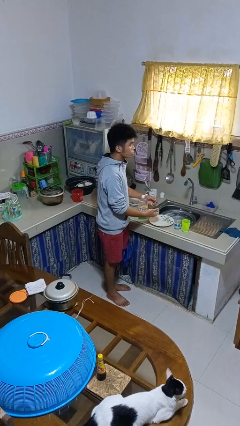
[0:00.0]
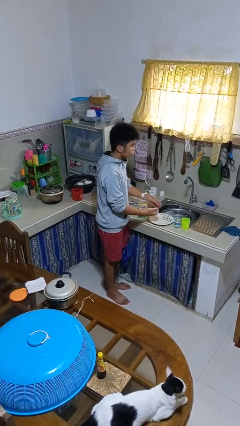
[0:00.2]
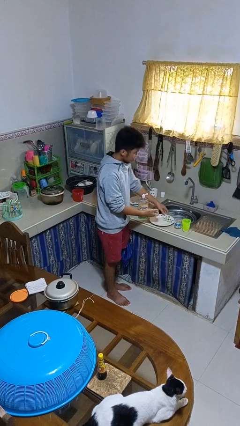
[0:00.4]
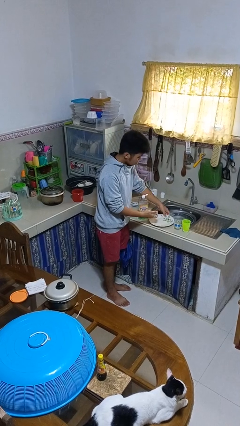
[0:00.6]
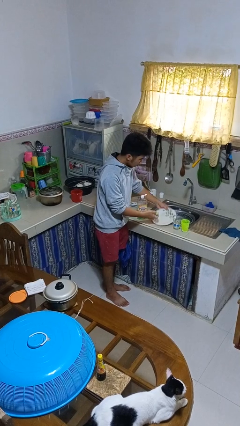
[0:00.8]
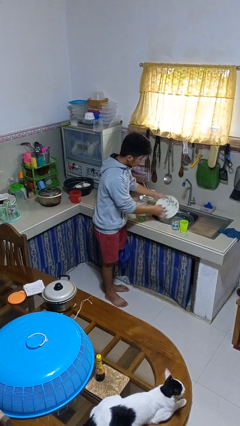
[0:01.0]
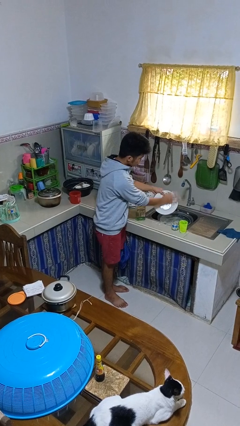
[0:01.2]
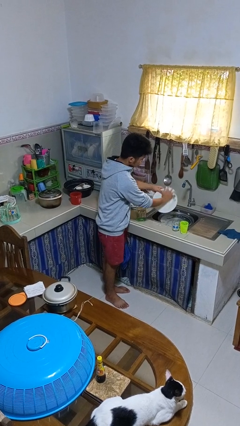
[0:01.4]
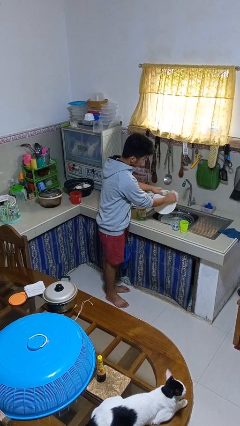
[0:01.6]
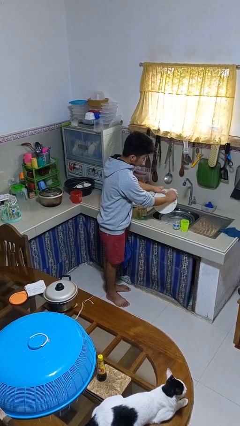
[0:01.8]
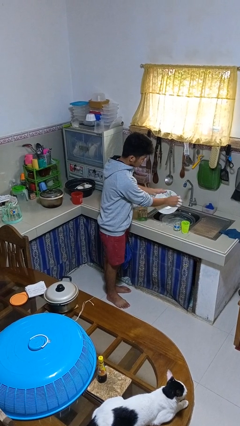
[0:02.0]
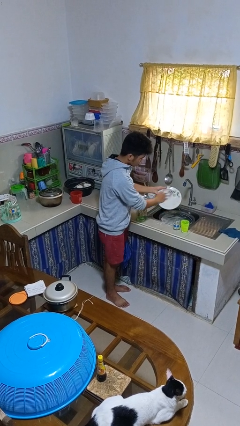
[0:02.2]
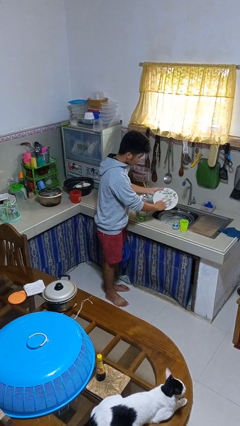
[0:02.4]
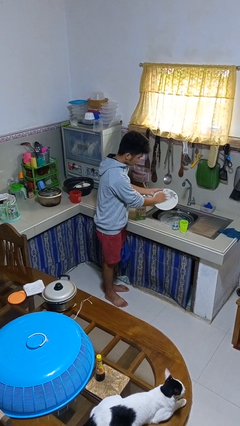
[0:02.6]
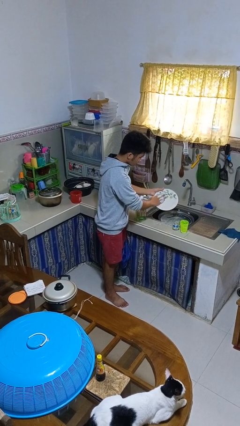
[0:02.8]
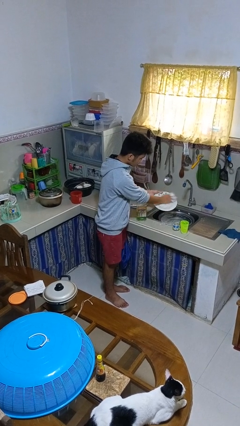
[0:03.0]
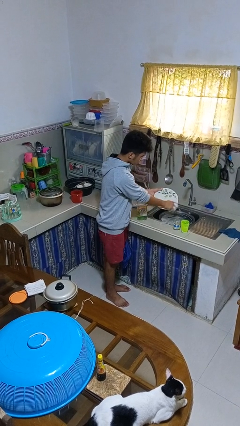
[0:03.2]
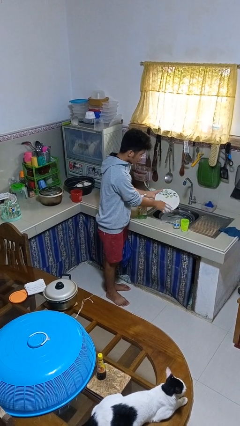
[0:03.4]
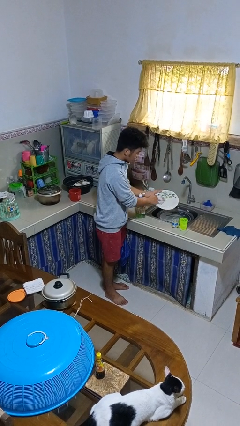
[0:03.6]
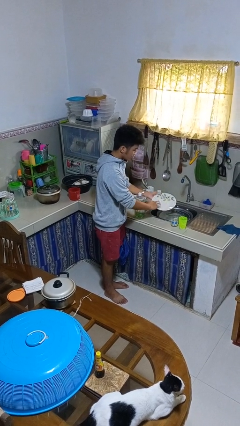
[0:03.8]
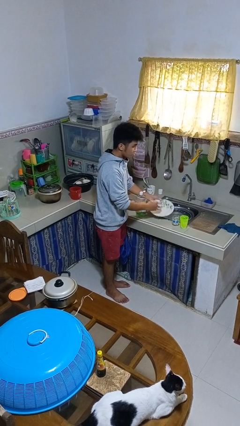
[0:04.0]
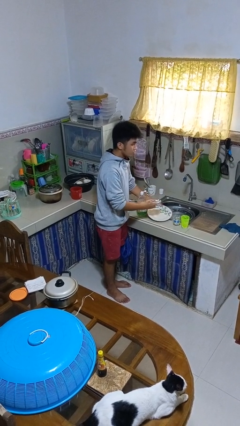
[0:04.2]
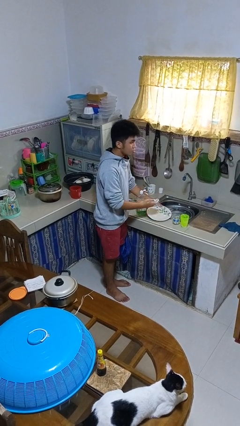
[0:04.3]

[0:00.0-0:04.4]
person washes dish

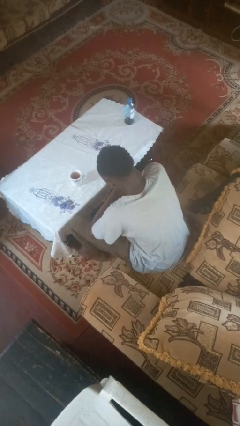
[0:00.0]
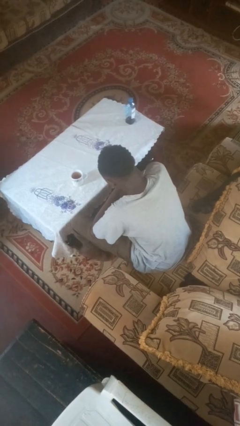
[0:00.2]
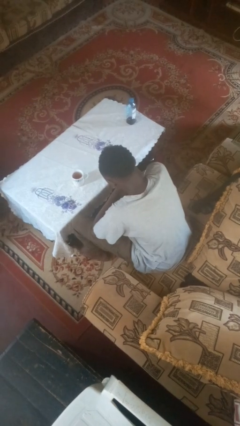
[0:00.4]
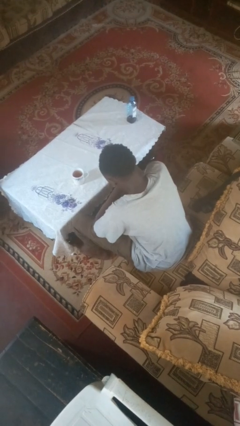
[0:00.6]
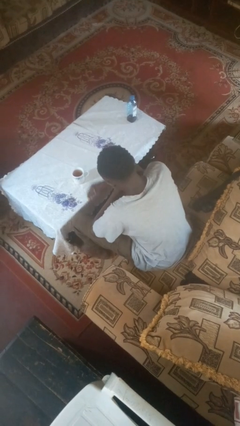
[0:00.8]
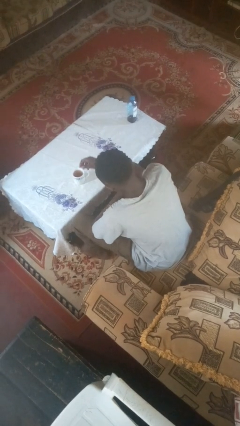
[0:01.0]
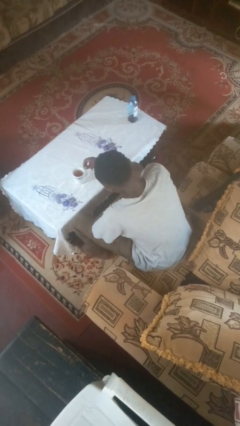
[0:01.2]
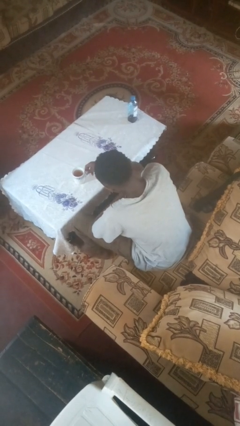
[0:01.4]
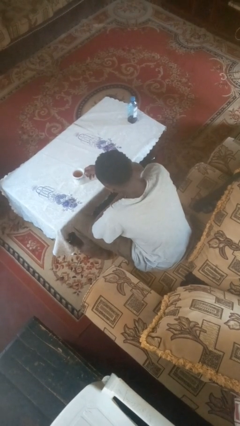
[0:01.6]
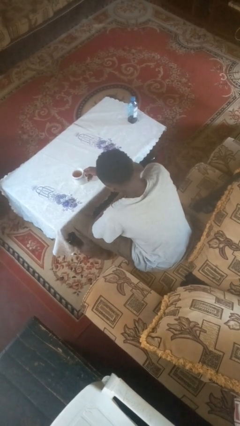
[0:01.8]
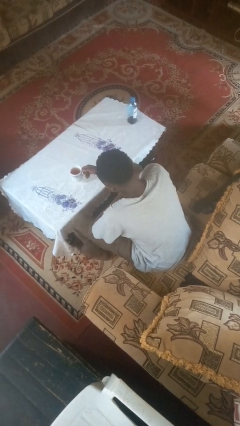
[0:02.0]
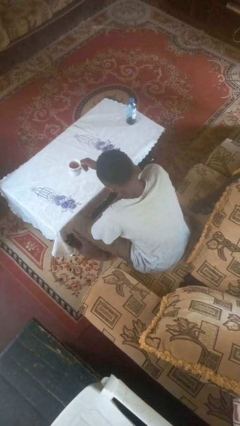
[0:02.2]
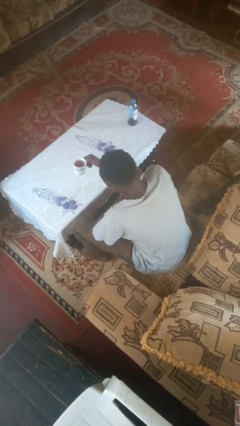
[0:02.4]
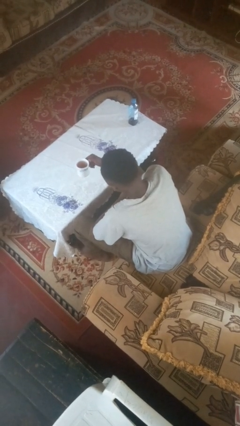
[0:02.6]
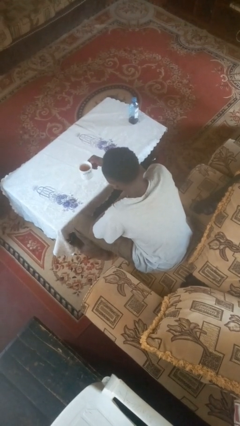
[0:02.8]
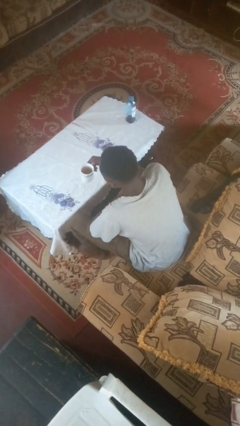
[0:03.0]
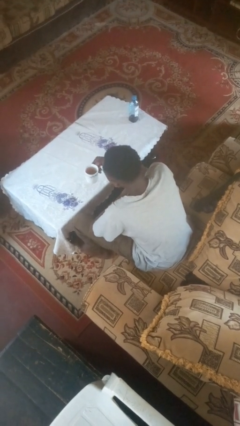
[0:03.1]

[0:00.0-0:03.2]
person picks up object from table

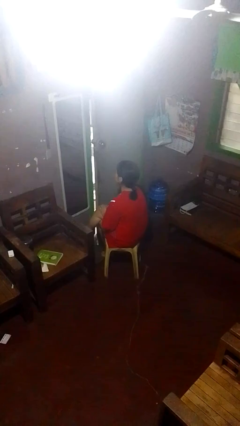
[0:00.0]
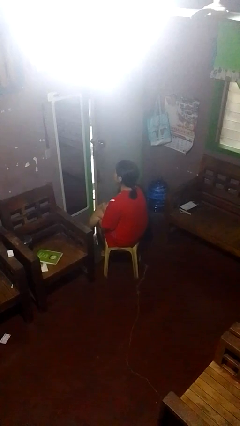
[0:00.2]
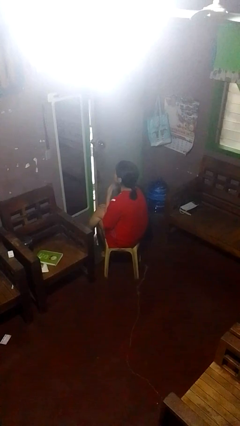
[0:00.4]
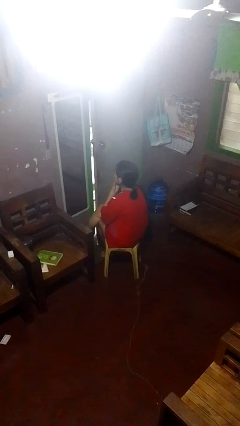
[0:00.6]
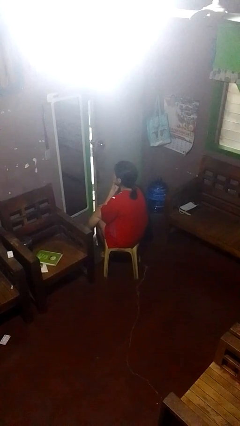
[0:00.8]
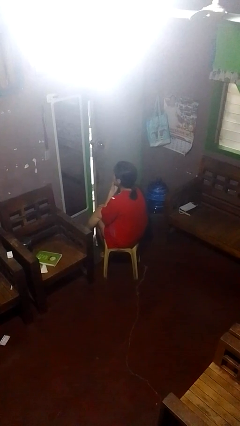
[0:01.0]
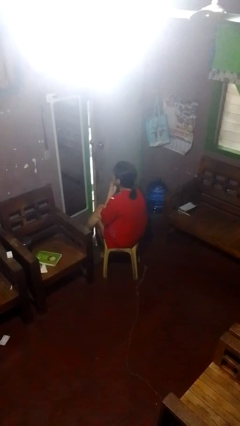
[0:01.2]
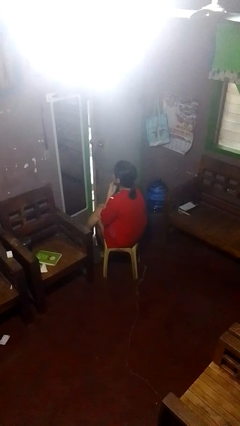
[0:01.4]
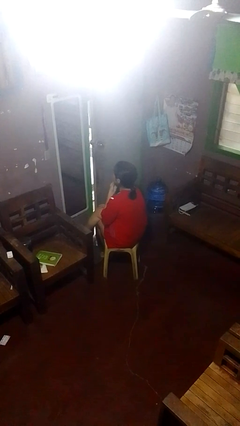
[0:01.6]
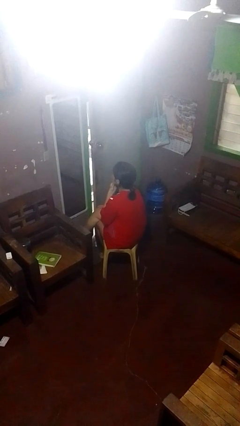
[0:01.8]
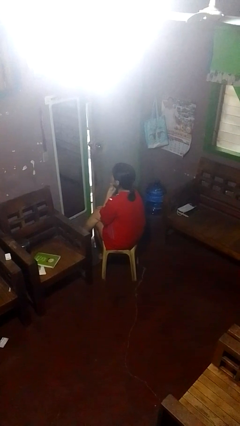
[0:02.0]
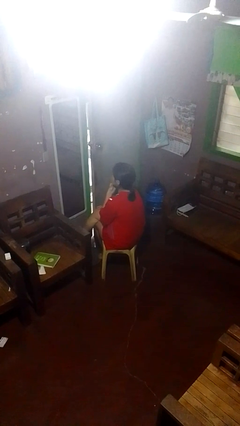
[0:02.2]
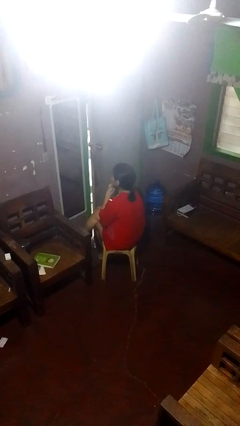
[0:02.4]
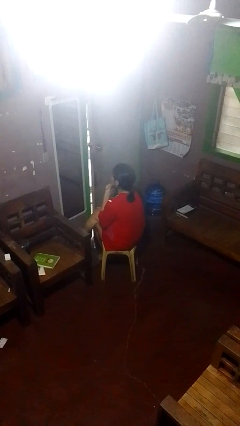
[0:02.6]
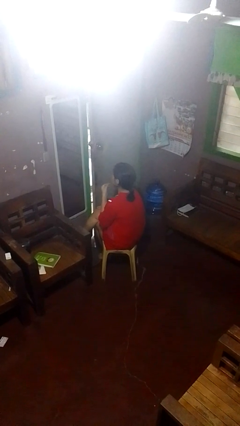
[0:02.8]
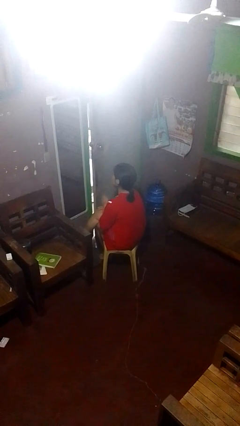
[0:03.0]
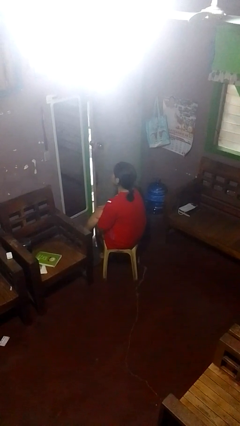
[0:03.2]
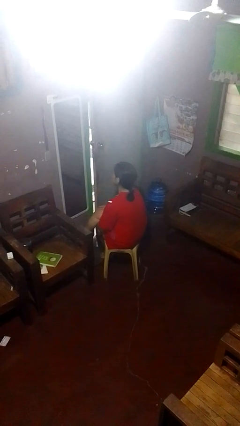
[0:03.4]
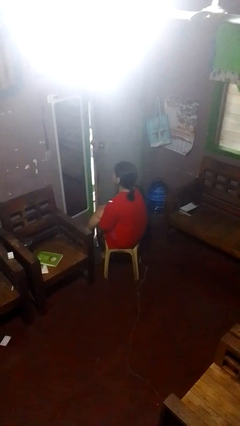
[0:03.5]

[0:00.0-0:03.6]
person strokes chin

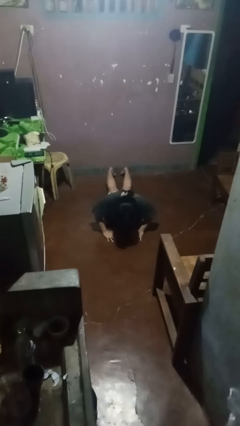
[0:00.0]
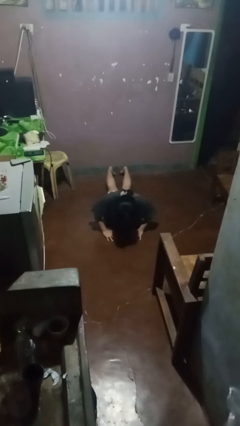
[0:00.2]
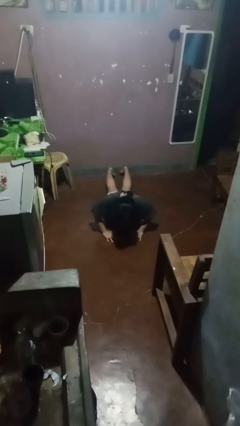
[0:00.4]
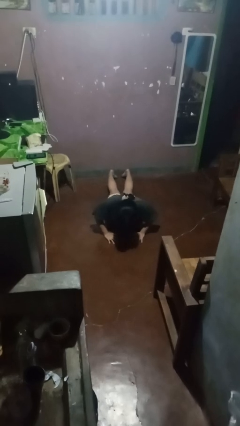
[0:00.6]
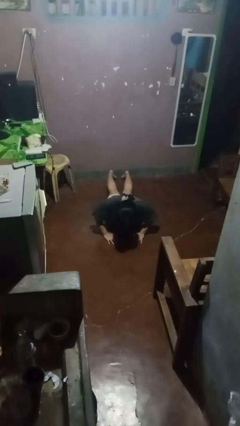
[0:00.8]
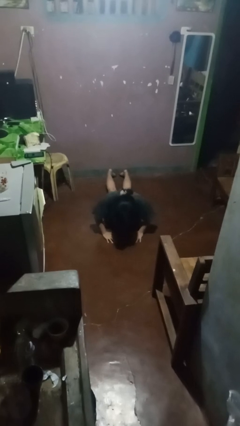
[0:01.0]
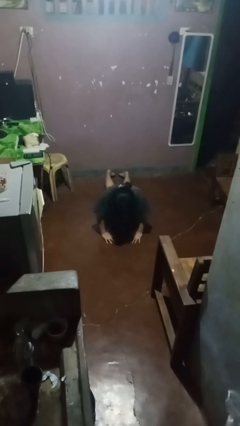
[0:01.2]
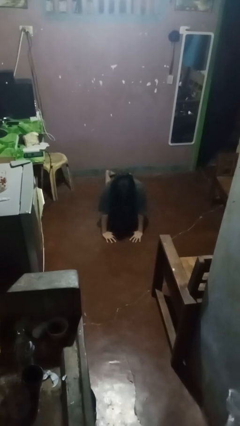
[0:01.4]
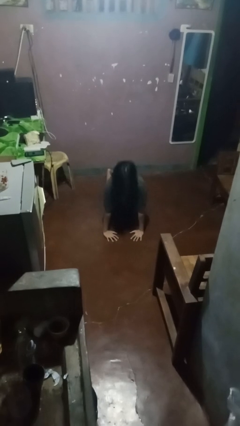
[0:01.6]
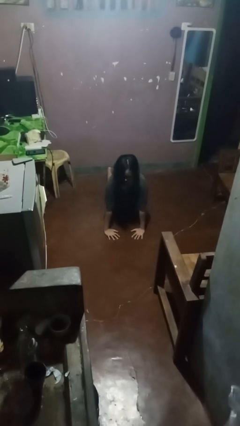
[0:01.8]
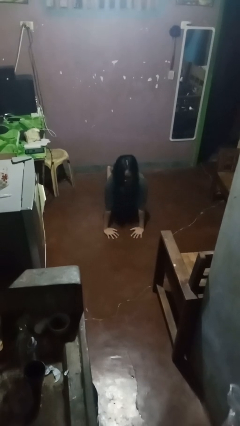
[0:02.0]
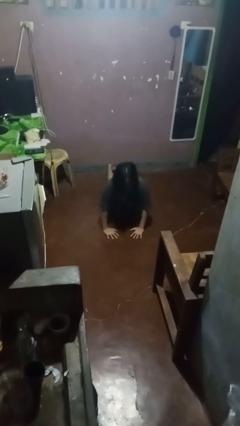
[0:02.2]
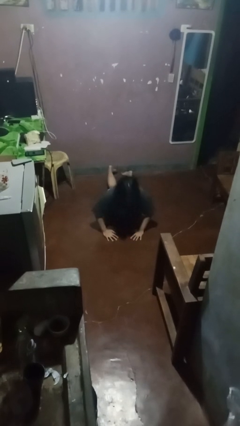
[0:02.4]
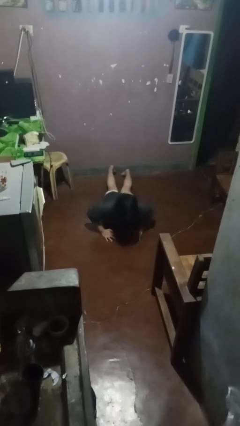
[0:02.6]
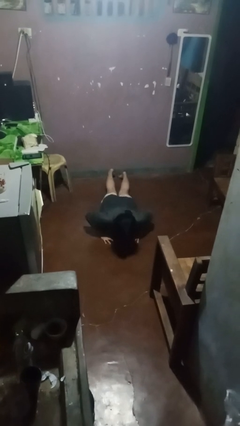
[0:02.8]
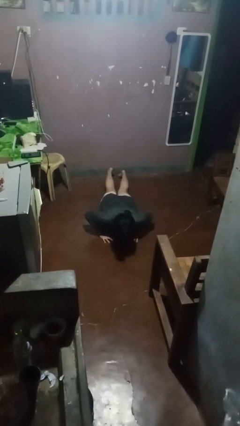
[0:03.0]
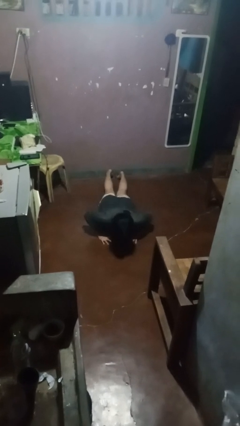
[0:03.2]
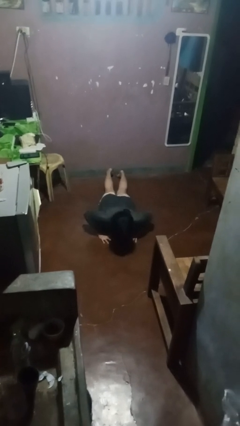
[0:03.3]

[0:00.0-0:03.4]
person exercises with pushup

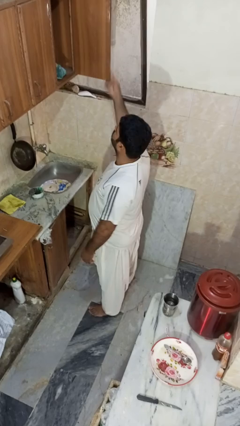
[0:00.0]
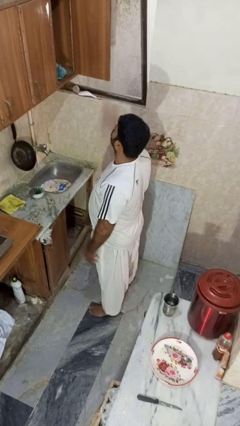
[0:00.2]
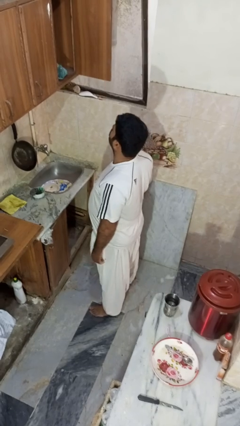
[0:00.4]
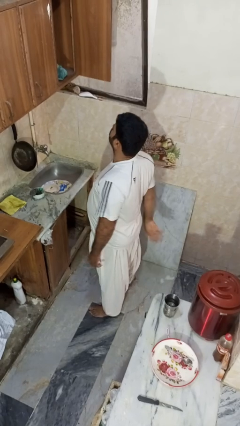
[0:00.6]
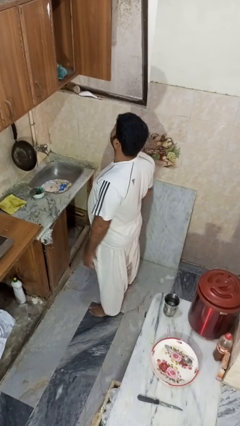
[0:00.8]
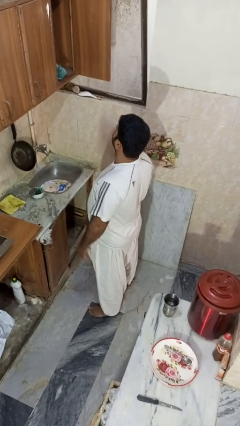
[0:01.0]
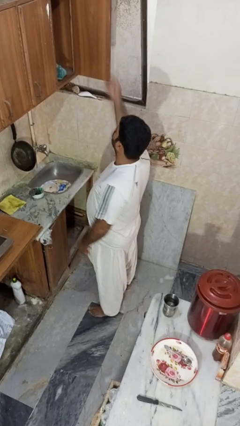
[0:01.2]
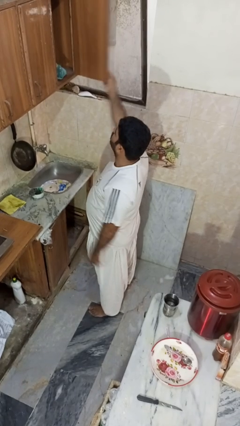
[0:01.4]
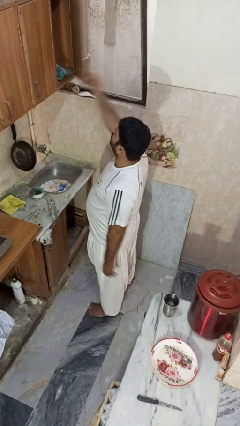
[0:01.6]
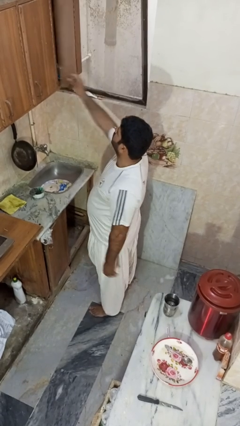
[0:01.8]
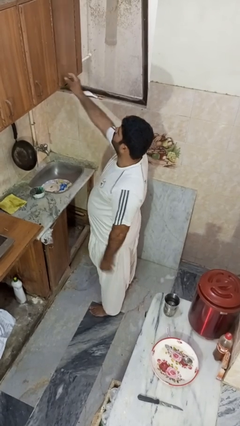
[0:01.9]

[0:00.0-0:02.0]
person closes cabinet

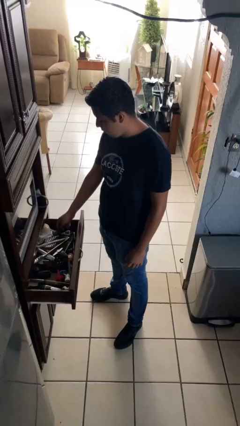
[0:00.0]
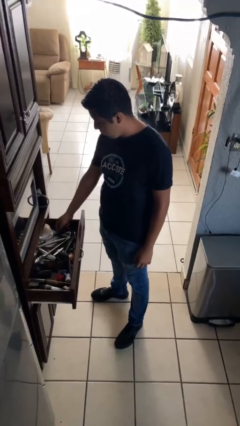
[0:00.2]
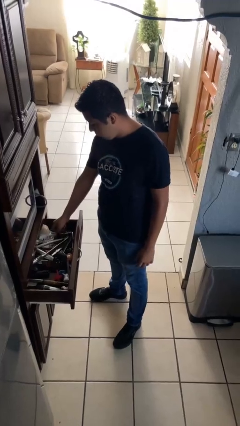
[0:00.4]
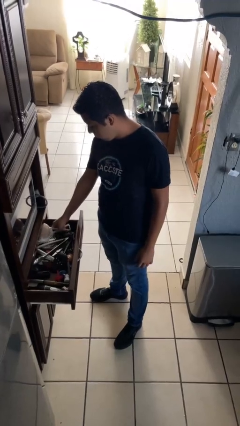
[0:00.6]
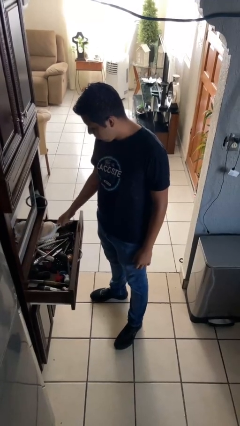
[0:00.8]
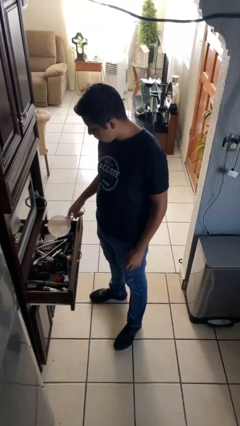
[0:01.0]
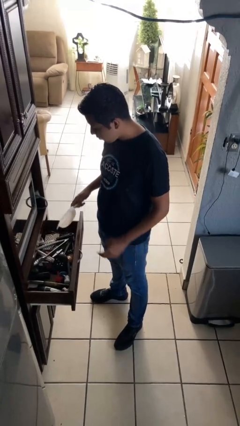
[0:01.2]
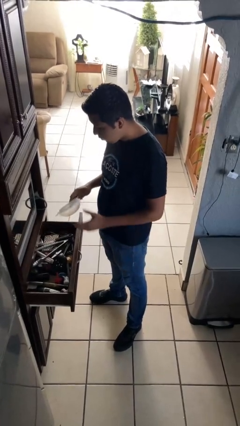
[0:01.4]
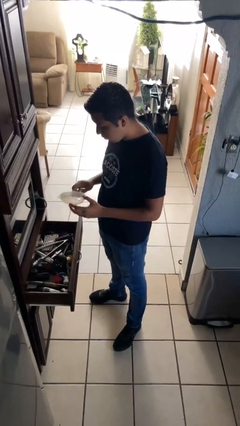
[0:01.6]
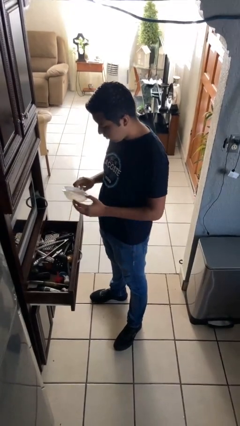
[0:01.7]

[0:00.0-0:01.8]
person takes object from kitchen drawer
